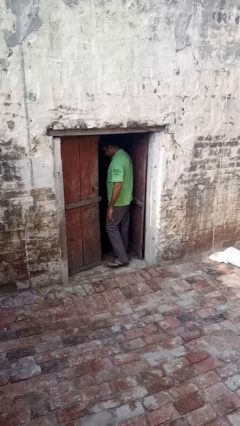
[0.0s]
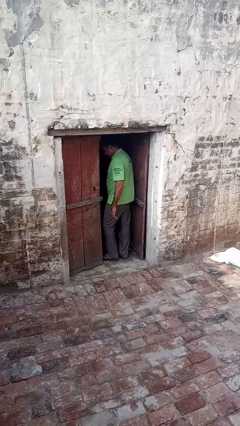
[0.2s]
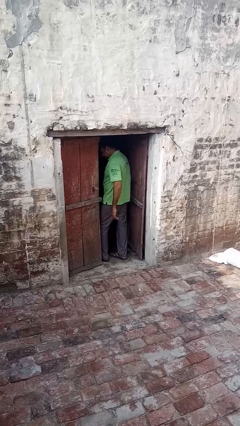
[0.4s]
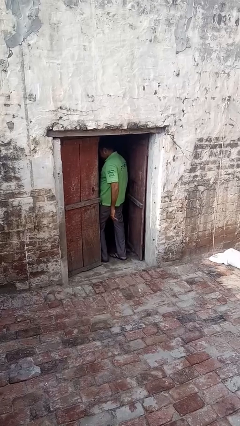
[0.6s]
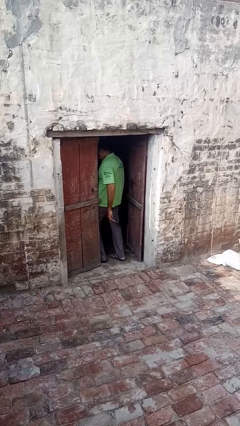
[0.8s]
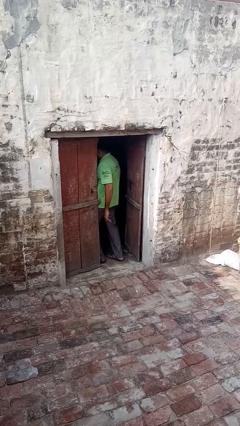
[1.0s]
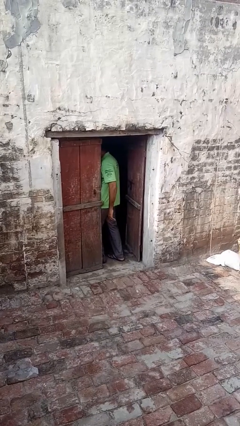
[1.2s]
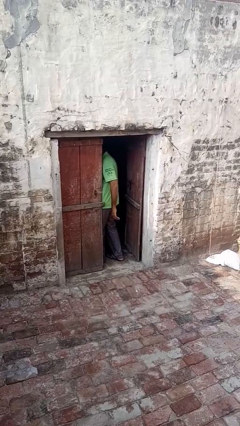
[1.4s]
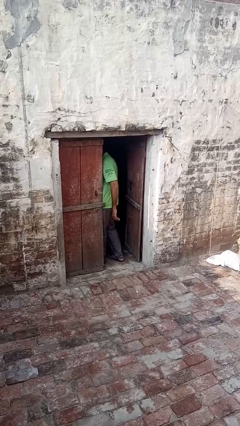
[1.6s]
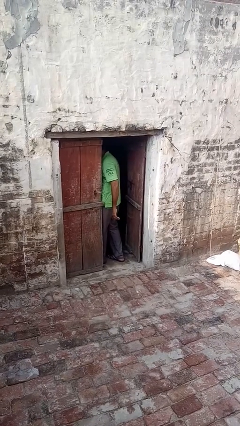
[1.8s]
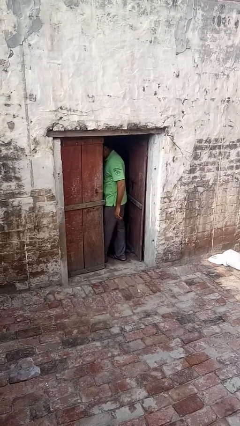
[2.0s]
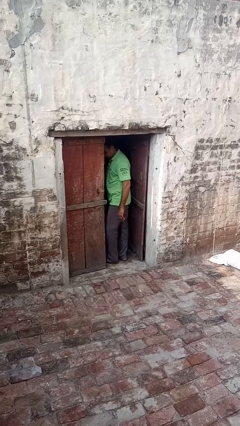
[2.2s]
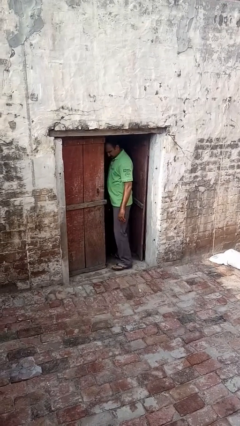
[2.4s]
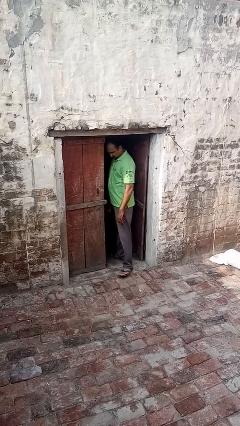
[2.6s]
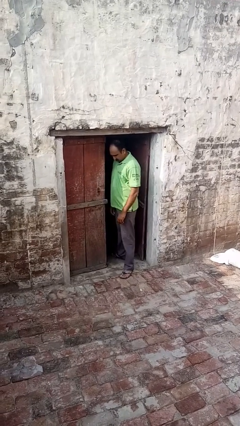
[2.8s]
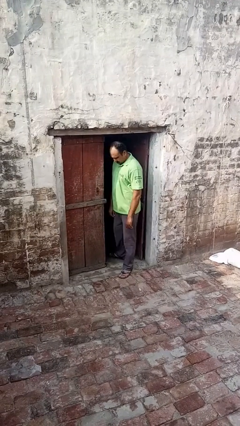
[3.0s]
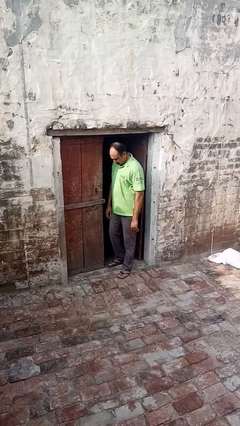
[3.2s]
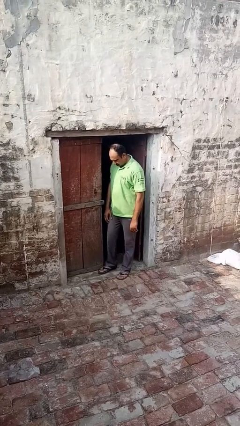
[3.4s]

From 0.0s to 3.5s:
person closes door with hip

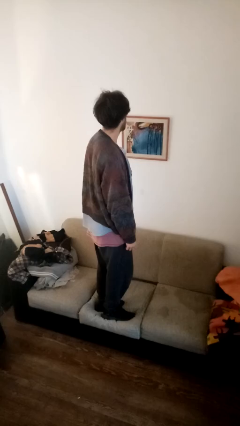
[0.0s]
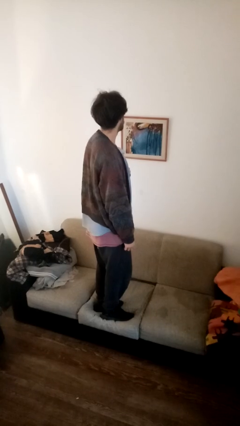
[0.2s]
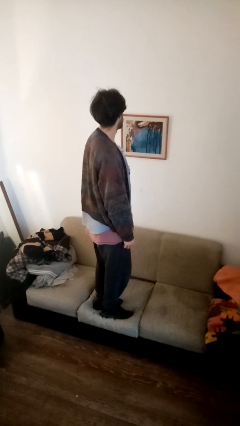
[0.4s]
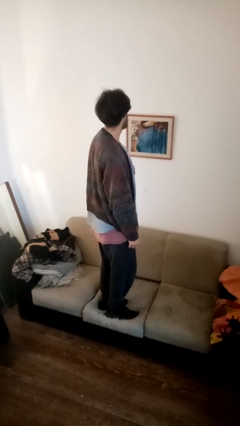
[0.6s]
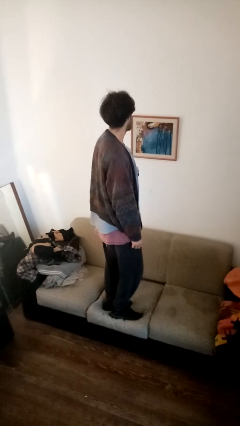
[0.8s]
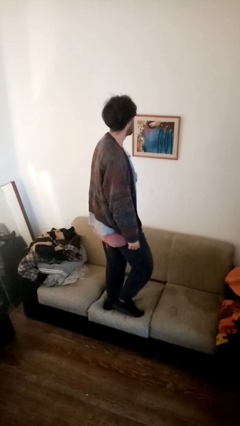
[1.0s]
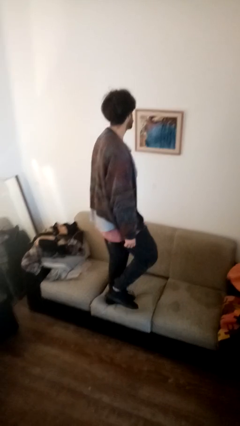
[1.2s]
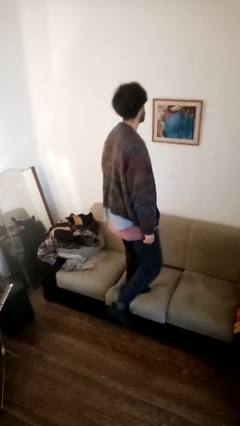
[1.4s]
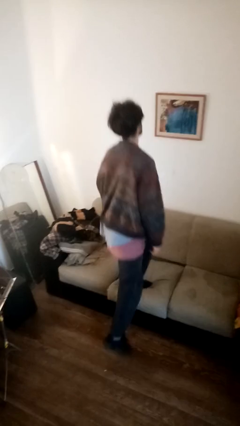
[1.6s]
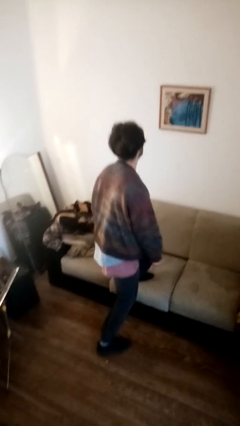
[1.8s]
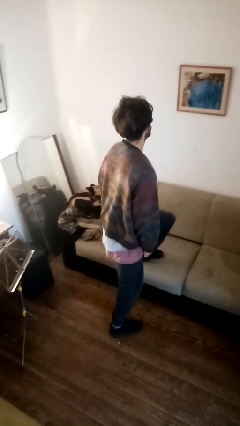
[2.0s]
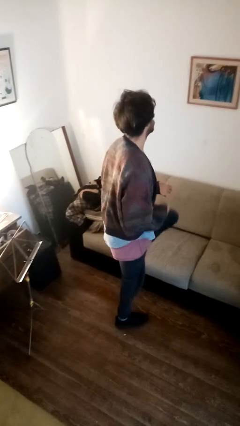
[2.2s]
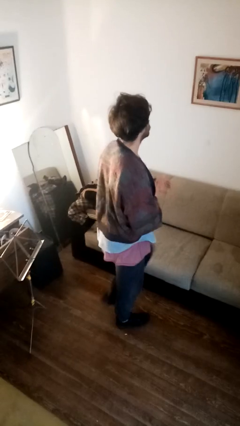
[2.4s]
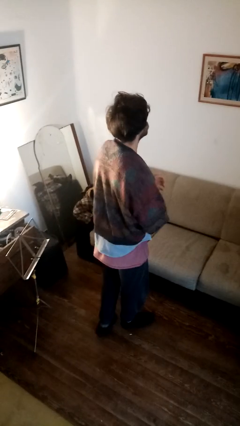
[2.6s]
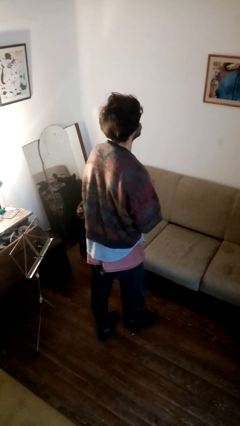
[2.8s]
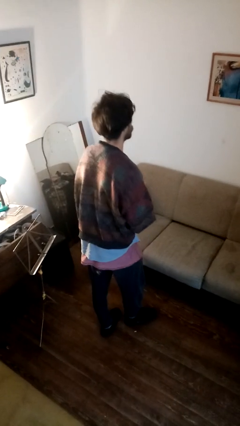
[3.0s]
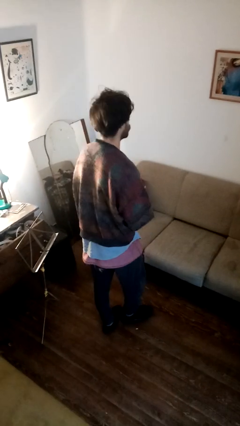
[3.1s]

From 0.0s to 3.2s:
person climbs off couch

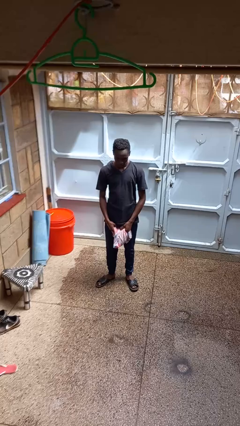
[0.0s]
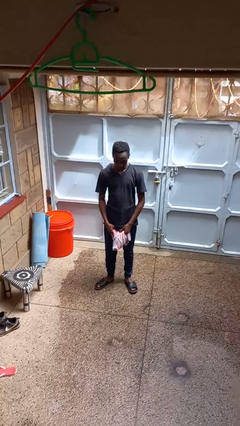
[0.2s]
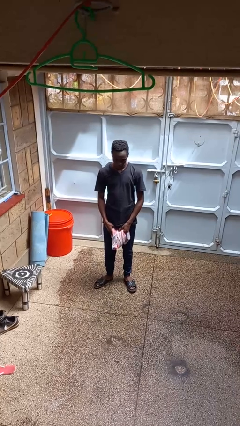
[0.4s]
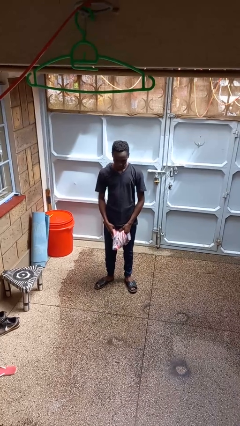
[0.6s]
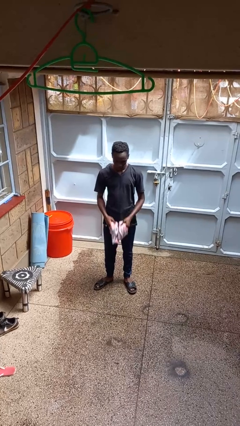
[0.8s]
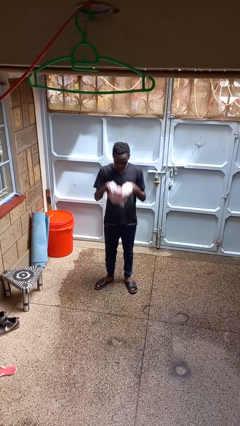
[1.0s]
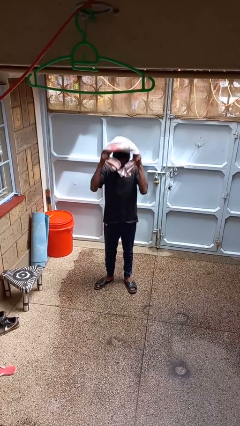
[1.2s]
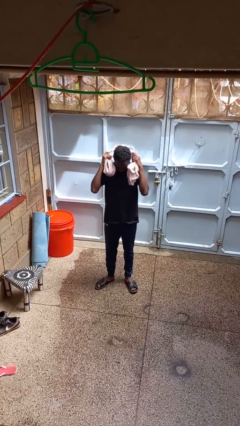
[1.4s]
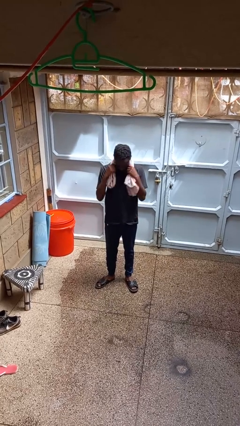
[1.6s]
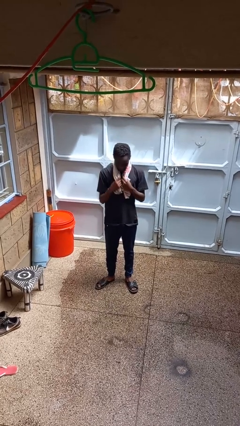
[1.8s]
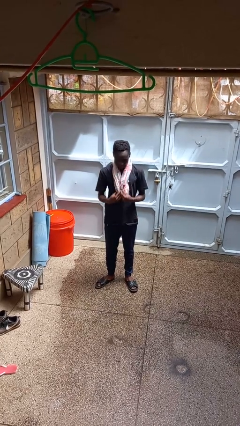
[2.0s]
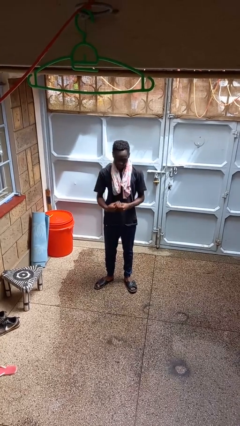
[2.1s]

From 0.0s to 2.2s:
person puts on scarf

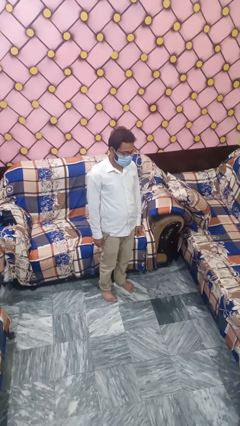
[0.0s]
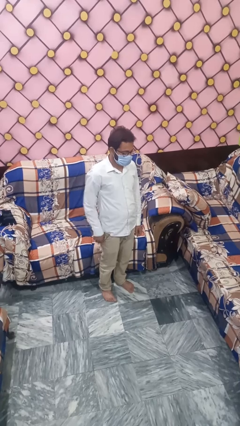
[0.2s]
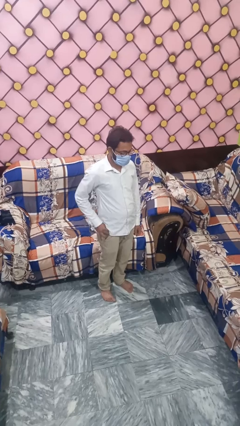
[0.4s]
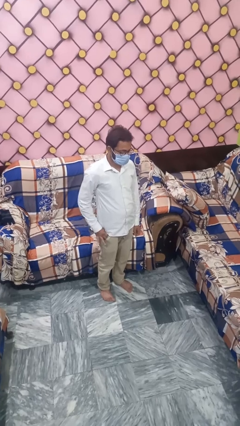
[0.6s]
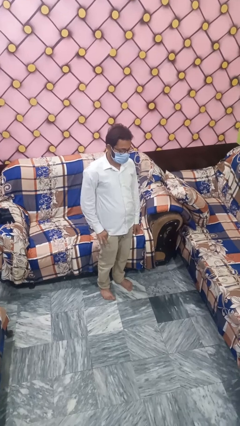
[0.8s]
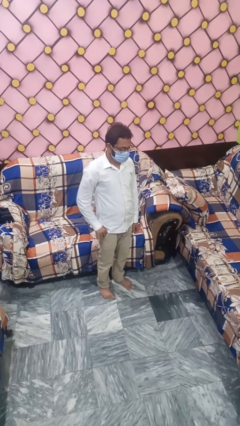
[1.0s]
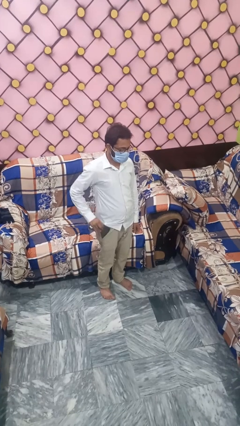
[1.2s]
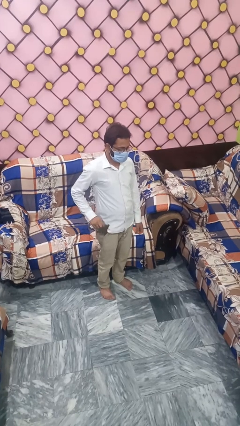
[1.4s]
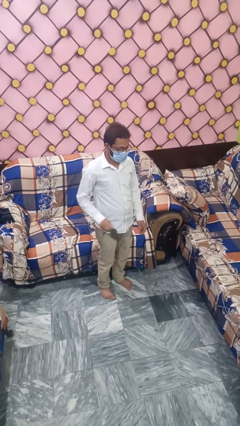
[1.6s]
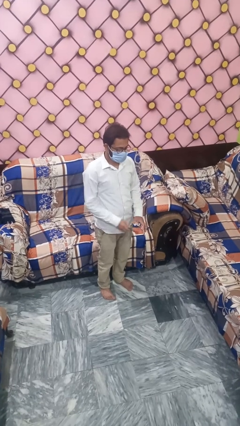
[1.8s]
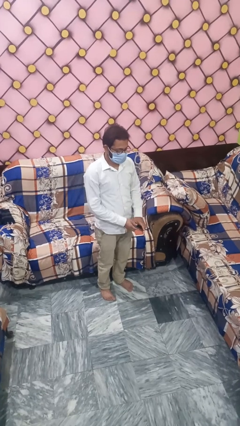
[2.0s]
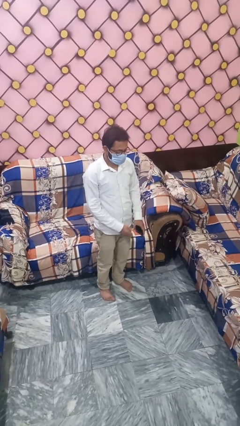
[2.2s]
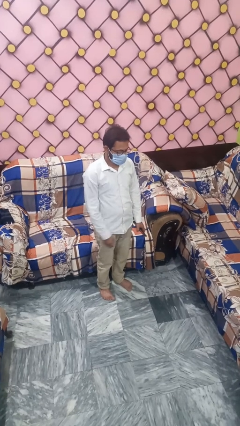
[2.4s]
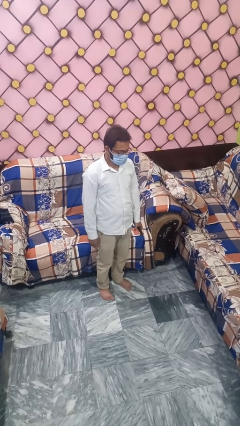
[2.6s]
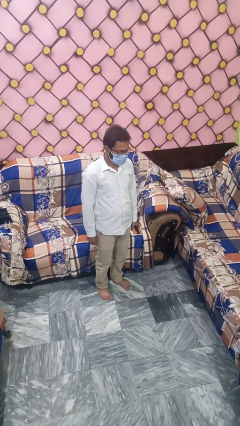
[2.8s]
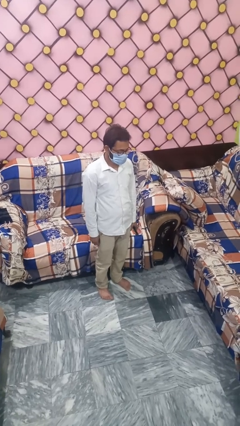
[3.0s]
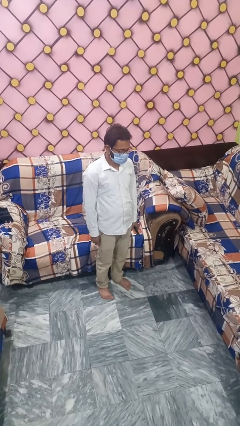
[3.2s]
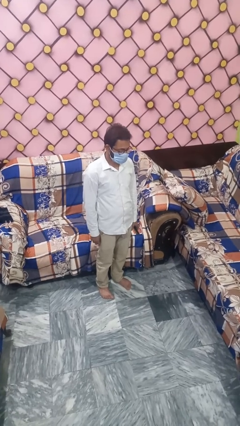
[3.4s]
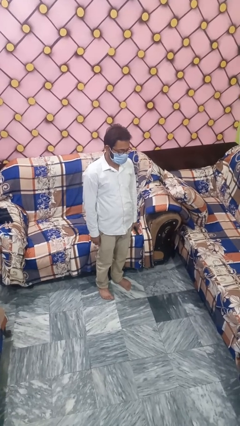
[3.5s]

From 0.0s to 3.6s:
person puts phone into pocket

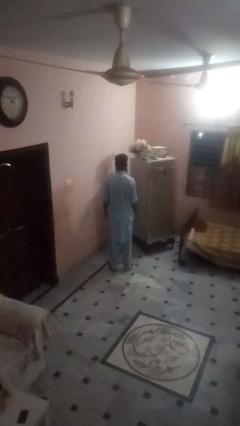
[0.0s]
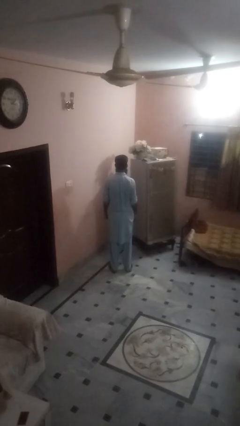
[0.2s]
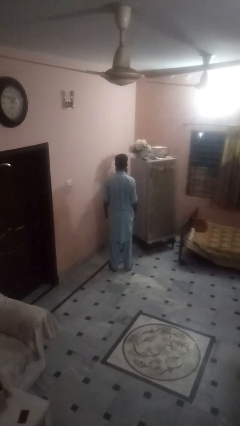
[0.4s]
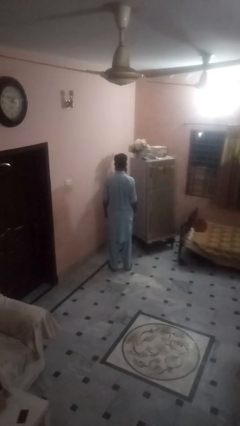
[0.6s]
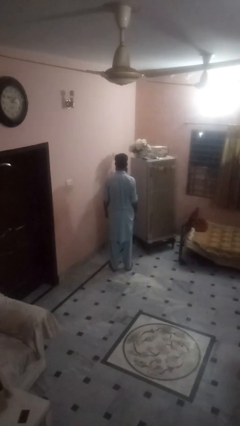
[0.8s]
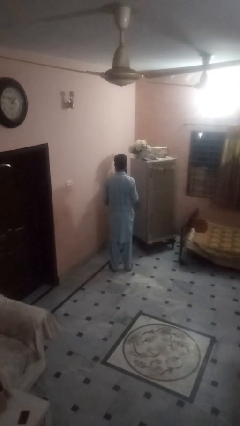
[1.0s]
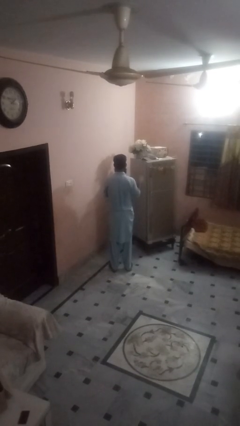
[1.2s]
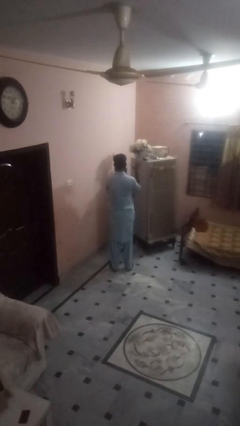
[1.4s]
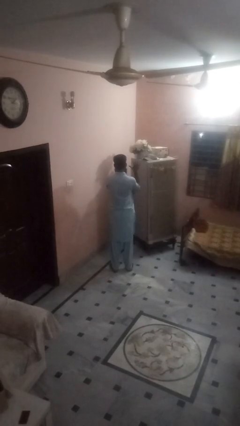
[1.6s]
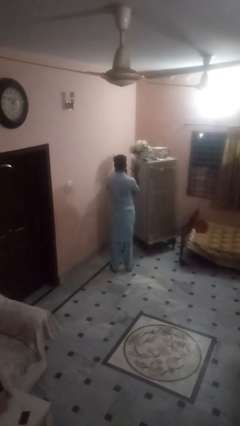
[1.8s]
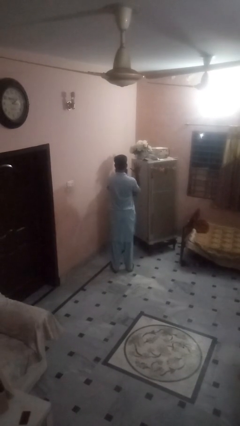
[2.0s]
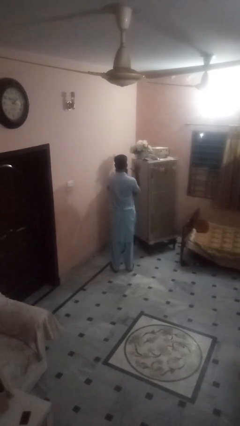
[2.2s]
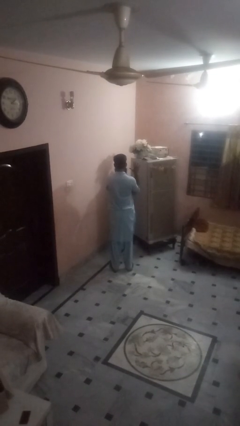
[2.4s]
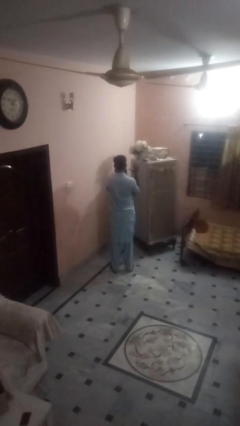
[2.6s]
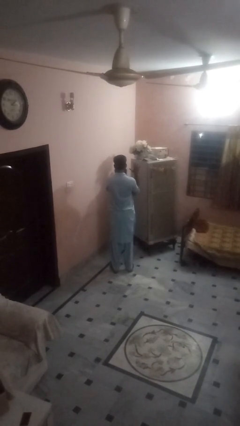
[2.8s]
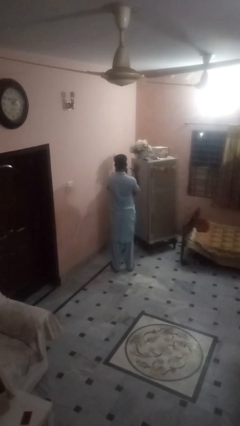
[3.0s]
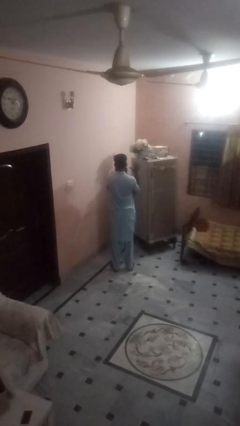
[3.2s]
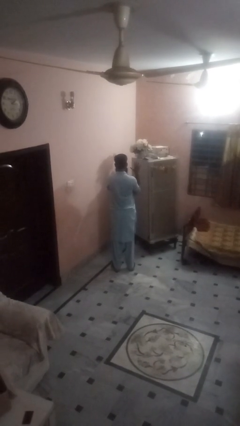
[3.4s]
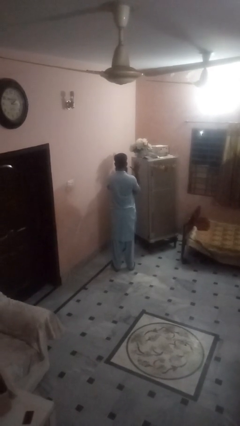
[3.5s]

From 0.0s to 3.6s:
person gestures number five

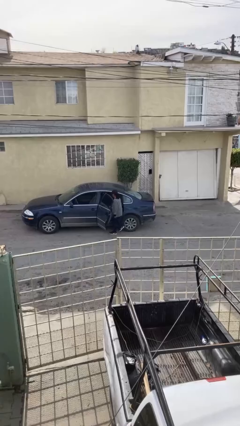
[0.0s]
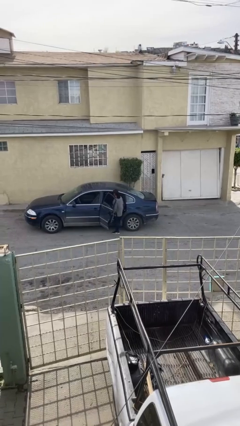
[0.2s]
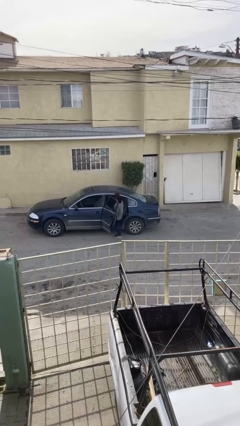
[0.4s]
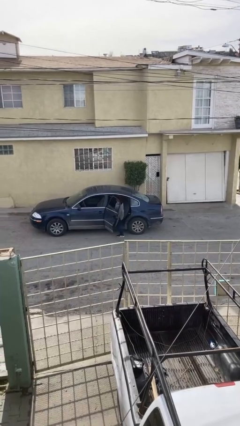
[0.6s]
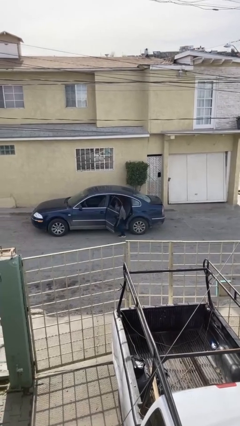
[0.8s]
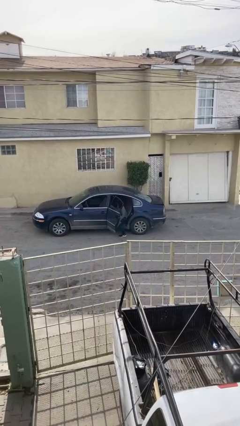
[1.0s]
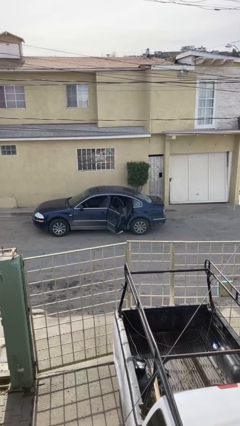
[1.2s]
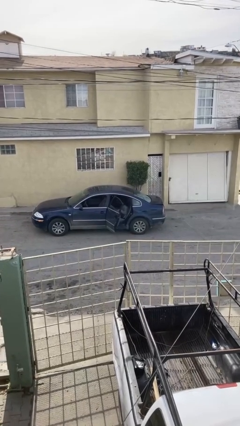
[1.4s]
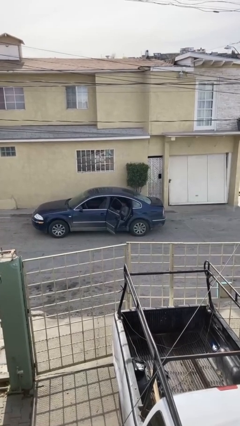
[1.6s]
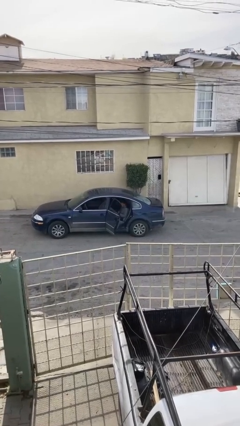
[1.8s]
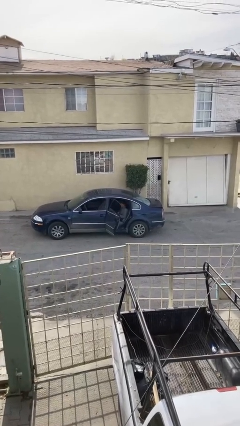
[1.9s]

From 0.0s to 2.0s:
person enters car
